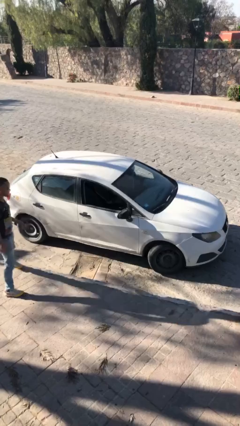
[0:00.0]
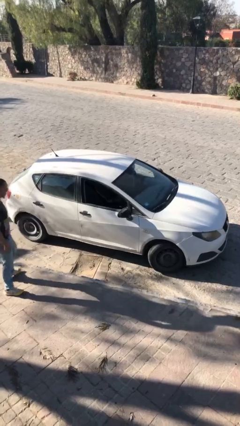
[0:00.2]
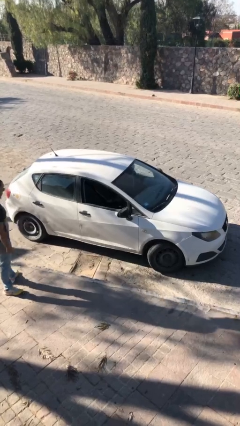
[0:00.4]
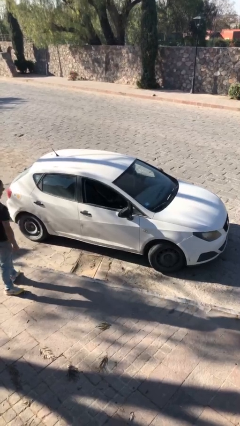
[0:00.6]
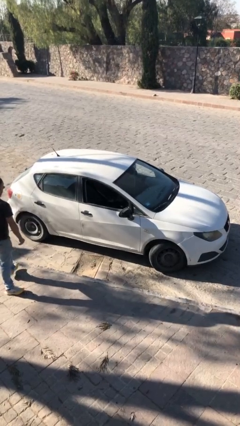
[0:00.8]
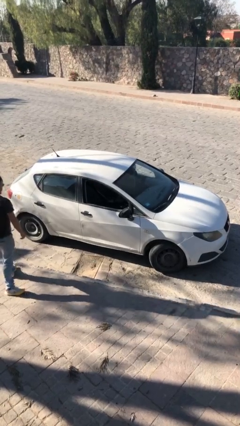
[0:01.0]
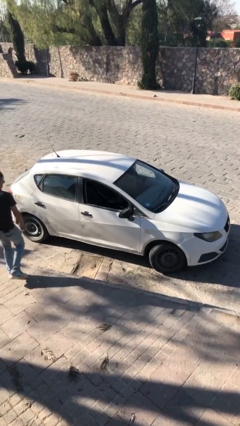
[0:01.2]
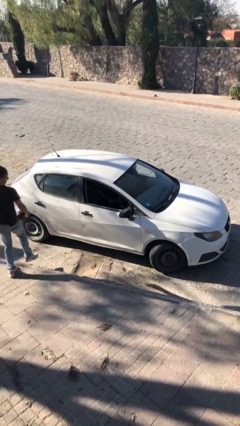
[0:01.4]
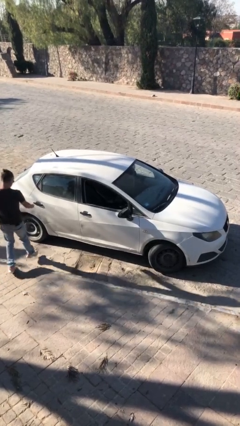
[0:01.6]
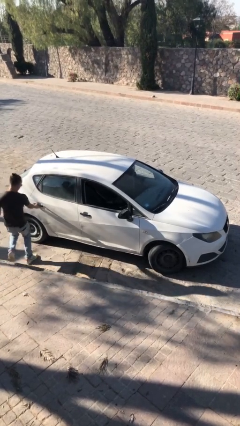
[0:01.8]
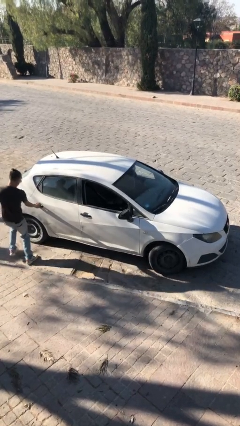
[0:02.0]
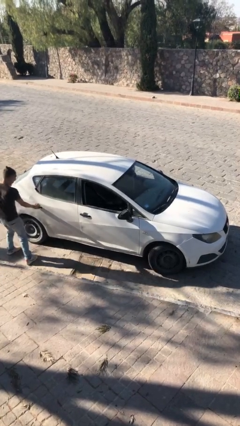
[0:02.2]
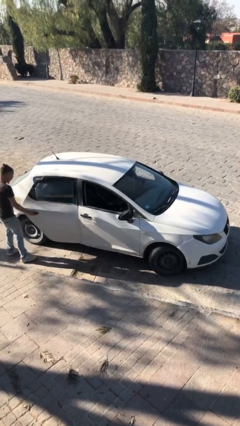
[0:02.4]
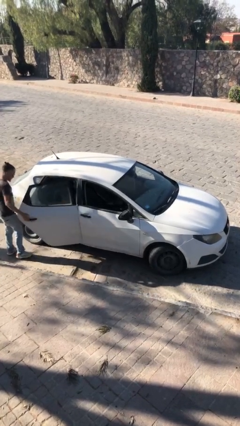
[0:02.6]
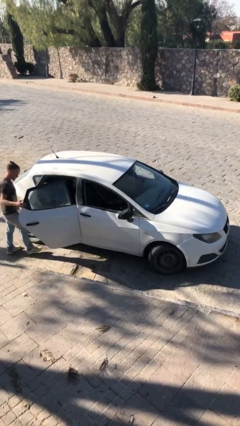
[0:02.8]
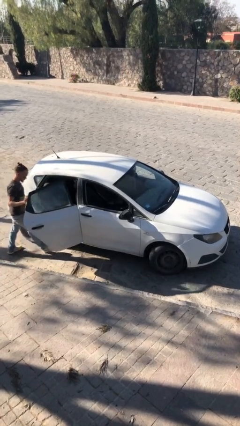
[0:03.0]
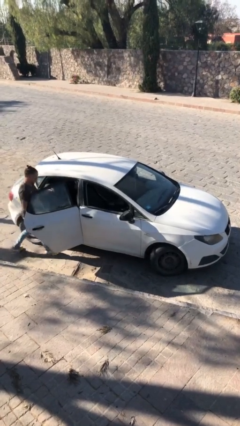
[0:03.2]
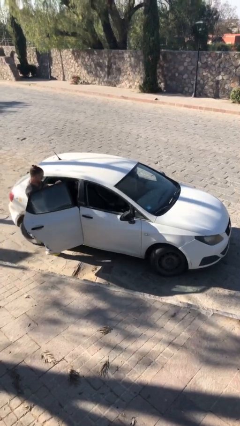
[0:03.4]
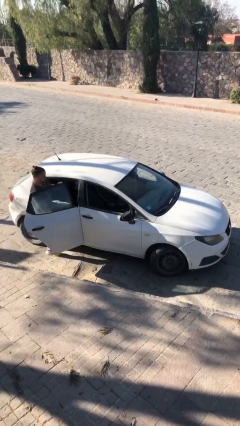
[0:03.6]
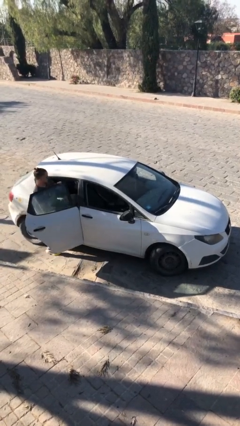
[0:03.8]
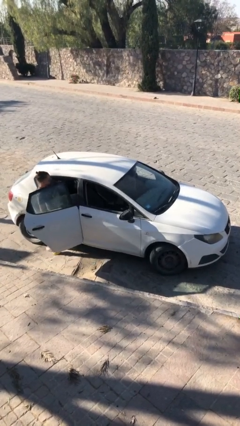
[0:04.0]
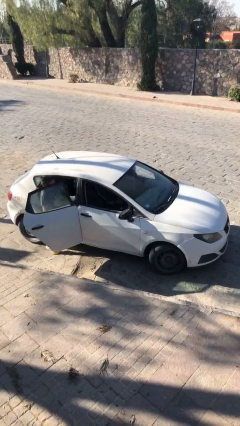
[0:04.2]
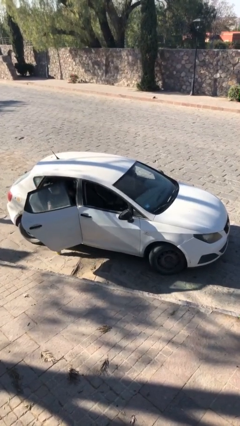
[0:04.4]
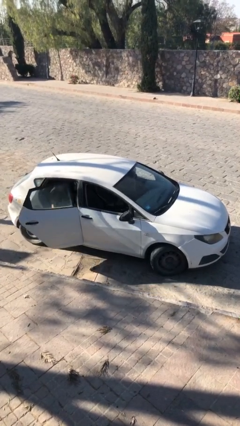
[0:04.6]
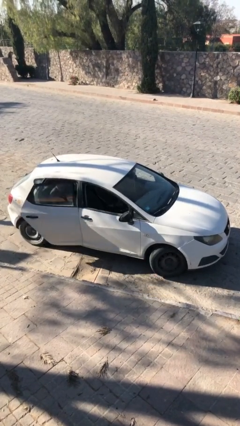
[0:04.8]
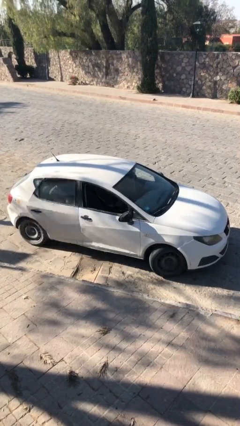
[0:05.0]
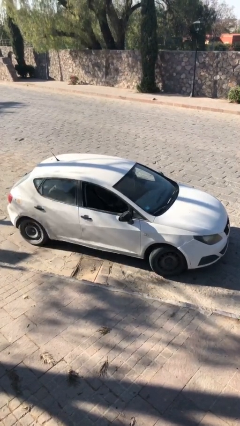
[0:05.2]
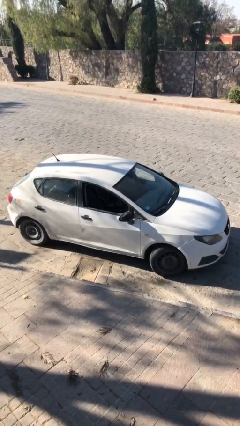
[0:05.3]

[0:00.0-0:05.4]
car picks up person

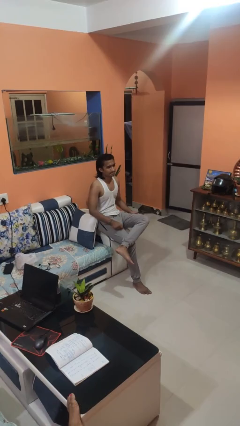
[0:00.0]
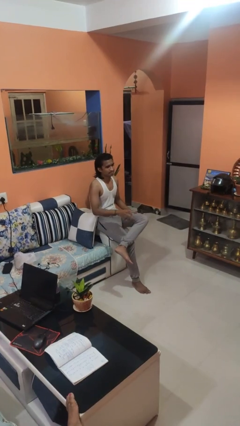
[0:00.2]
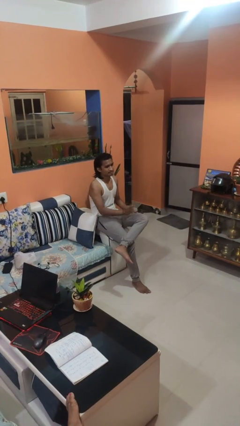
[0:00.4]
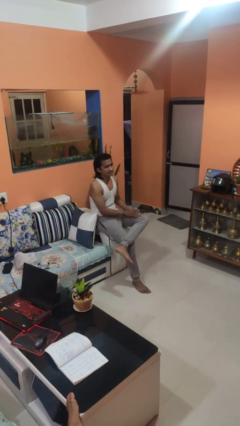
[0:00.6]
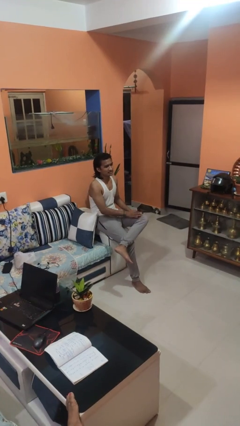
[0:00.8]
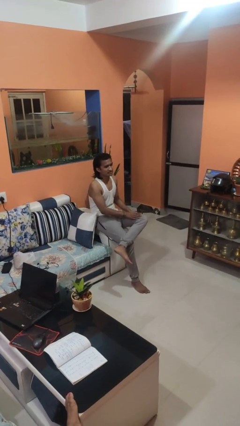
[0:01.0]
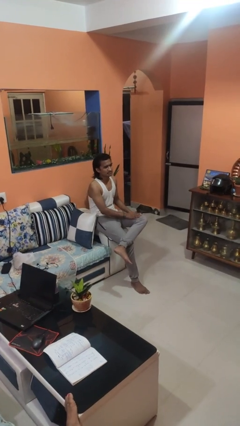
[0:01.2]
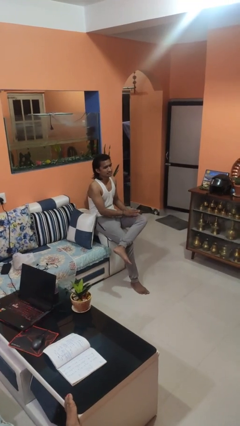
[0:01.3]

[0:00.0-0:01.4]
person slaps hands on thighs

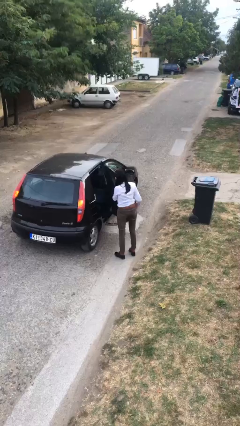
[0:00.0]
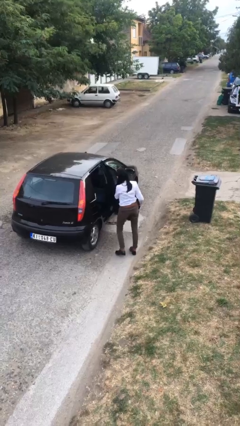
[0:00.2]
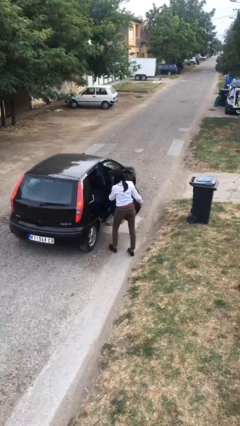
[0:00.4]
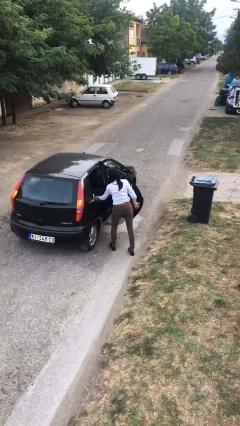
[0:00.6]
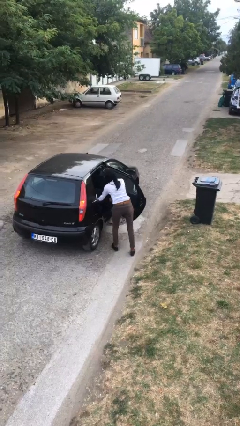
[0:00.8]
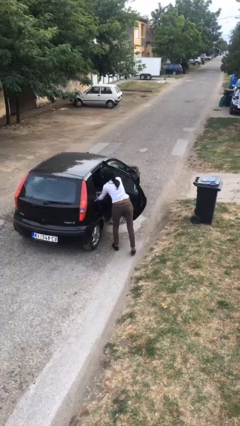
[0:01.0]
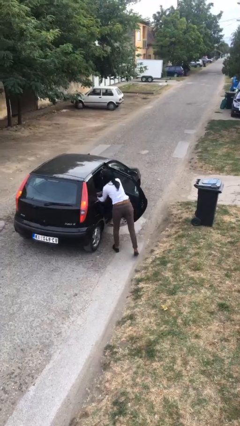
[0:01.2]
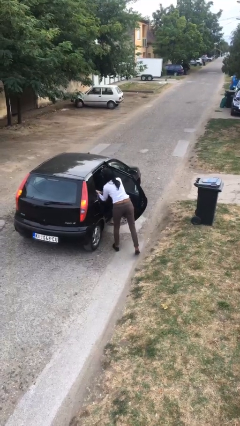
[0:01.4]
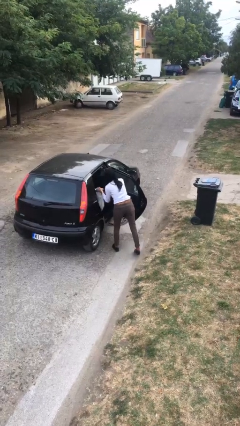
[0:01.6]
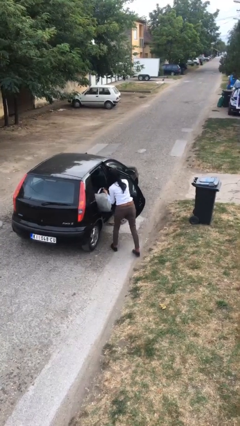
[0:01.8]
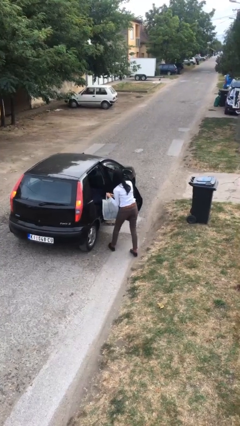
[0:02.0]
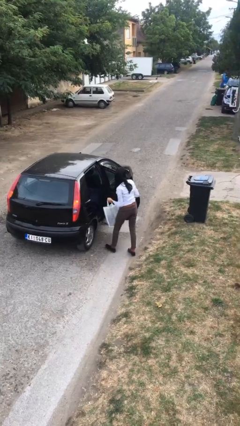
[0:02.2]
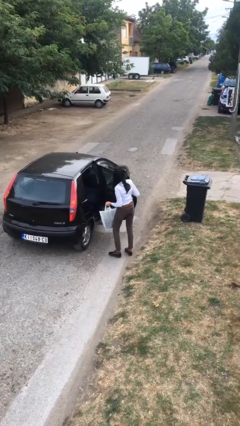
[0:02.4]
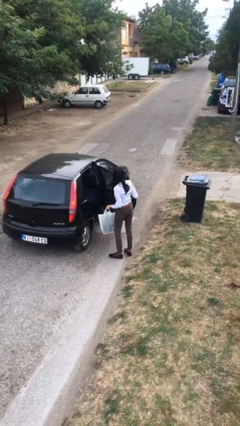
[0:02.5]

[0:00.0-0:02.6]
person unloads car

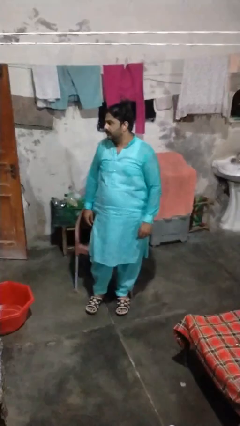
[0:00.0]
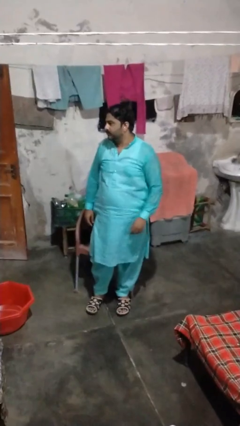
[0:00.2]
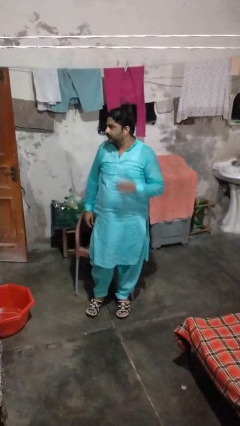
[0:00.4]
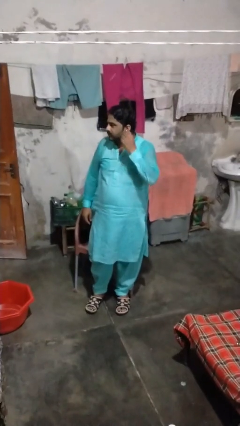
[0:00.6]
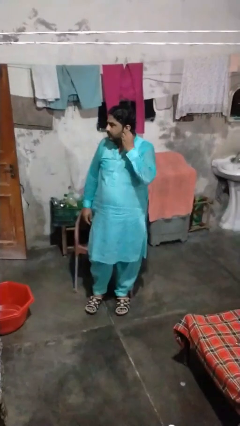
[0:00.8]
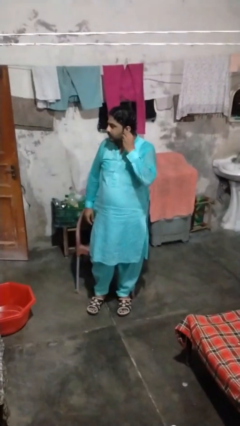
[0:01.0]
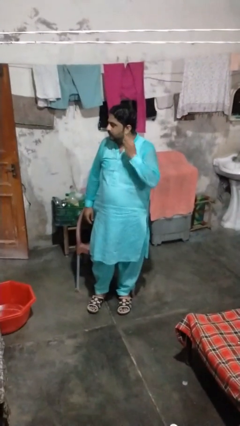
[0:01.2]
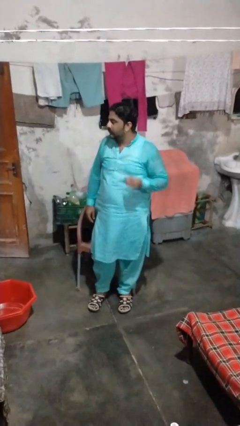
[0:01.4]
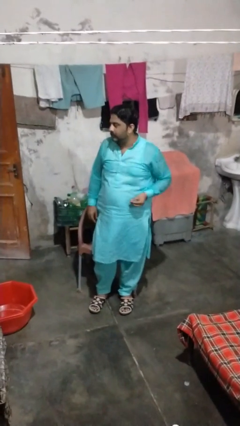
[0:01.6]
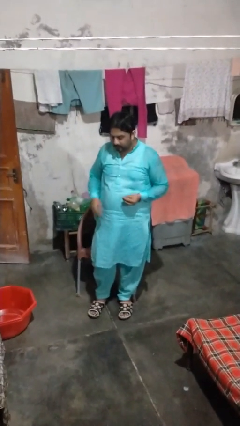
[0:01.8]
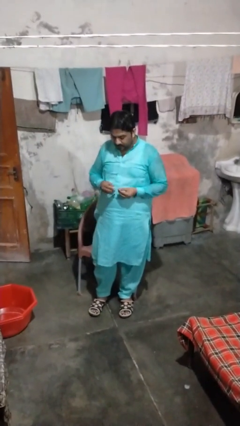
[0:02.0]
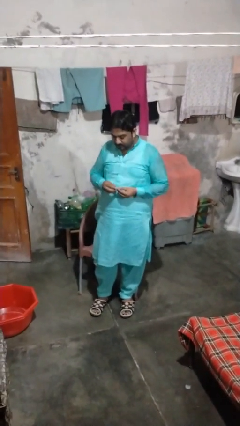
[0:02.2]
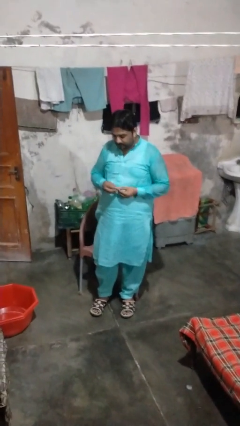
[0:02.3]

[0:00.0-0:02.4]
person takes off earrings

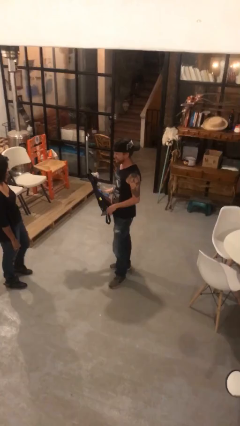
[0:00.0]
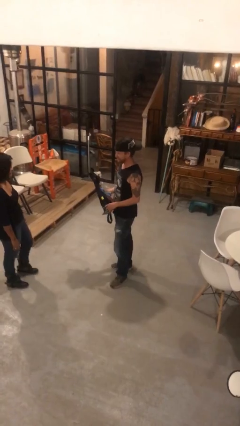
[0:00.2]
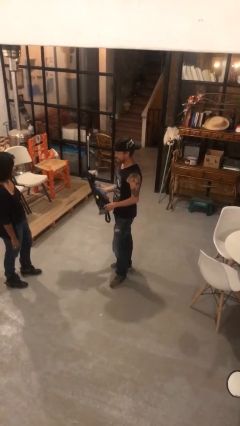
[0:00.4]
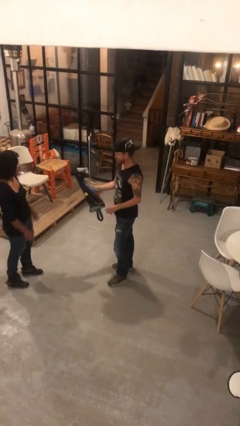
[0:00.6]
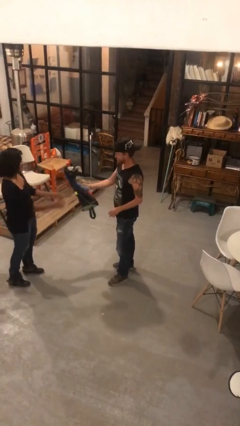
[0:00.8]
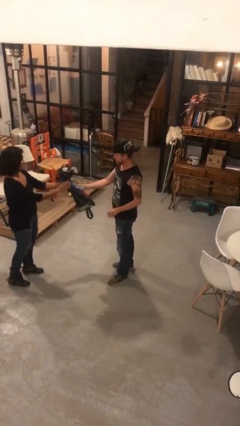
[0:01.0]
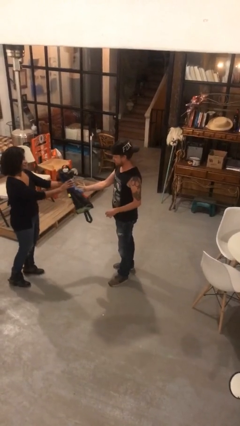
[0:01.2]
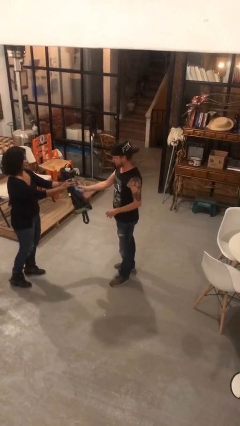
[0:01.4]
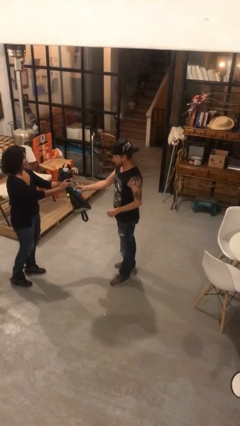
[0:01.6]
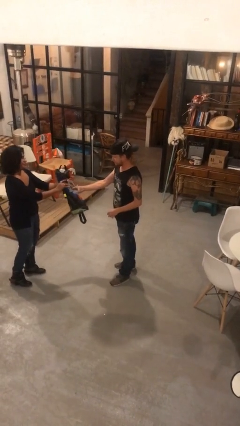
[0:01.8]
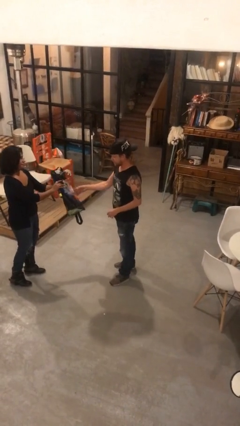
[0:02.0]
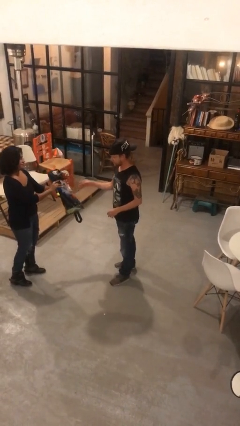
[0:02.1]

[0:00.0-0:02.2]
person transfers object to person

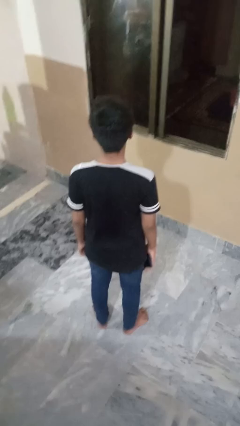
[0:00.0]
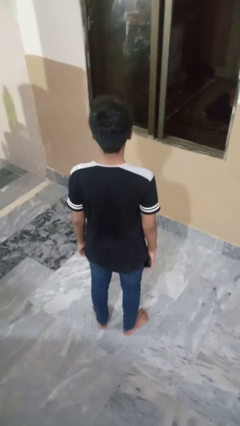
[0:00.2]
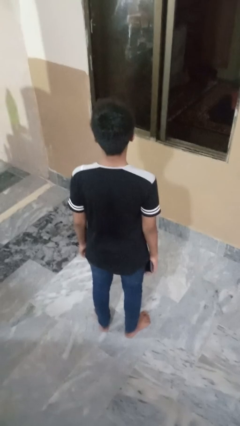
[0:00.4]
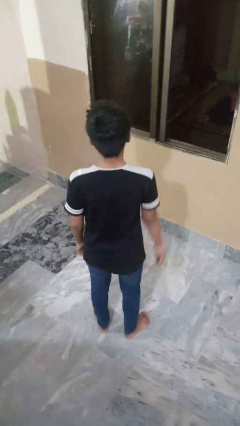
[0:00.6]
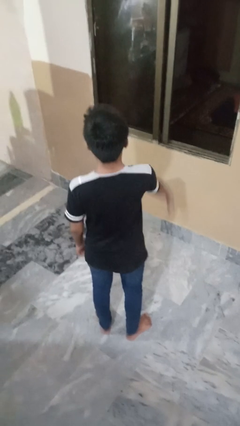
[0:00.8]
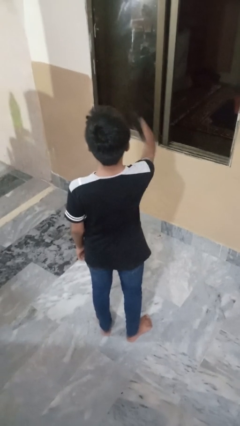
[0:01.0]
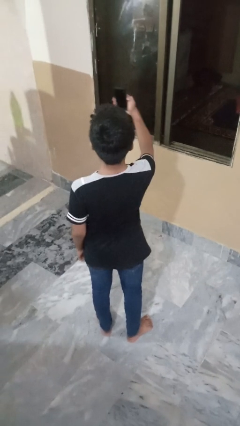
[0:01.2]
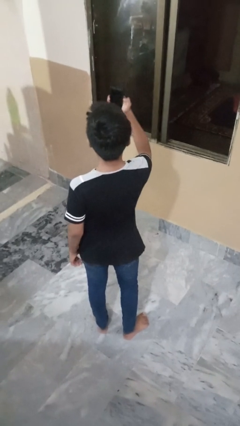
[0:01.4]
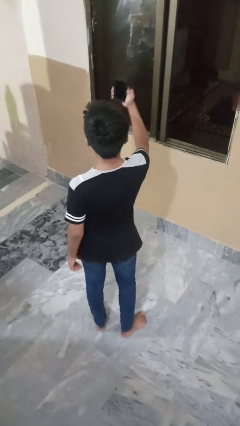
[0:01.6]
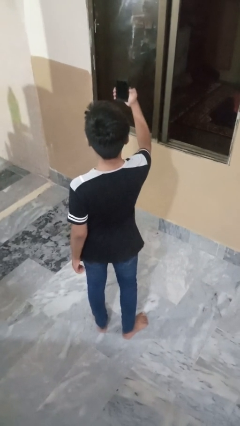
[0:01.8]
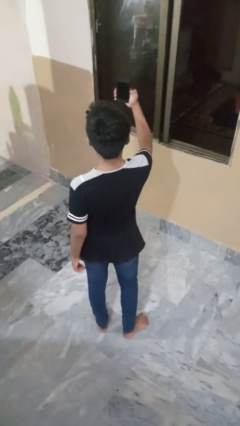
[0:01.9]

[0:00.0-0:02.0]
person takes selfie

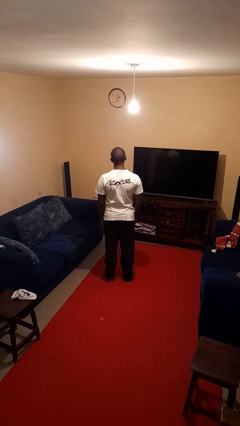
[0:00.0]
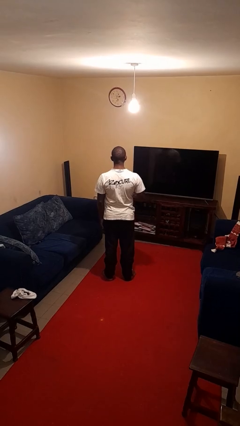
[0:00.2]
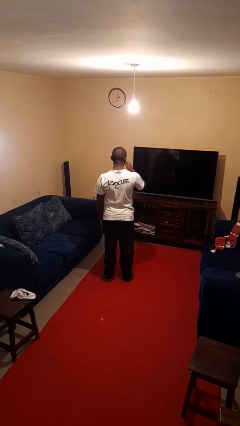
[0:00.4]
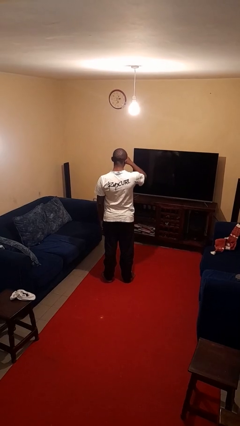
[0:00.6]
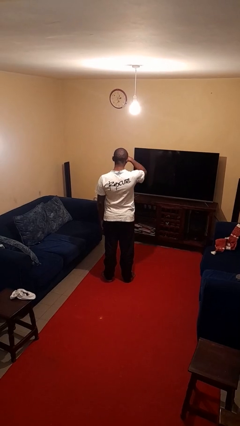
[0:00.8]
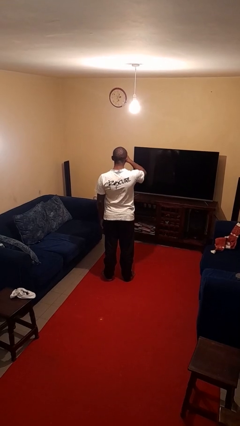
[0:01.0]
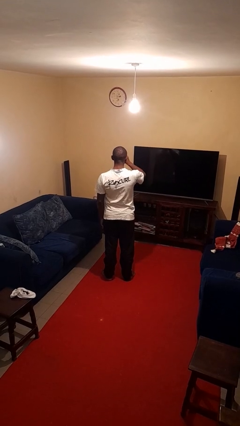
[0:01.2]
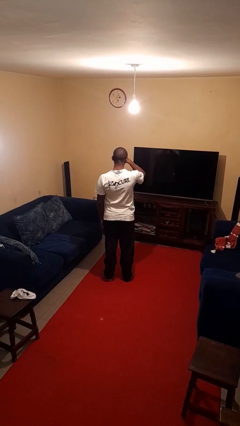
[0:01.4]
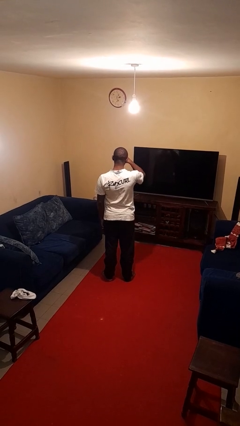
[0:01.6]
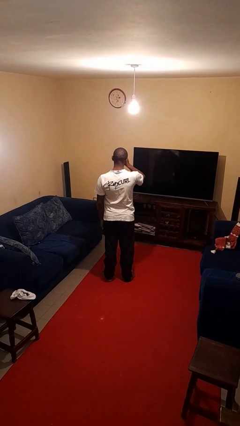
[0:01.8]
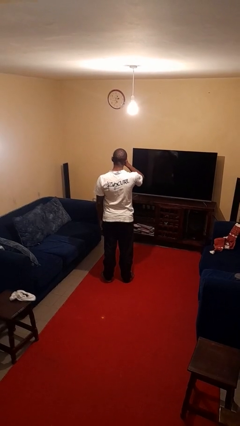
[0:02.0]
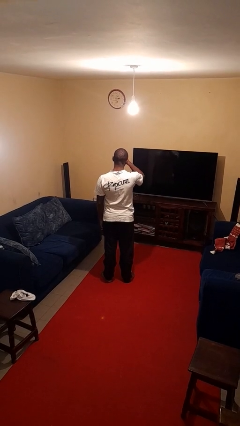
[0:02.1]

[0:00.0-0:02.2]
person rubs eyes
